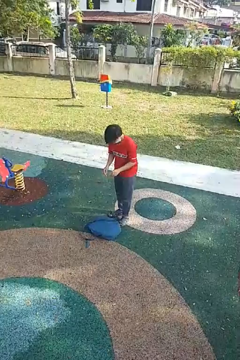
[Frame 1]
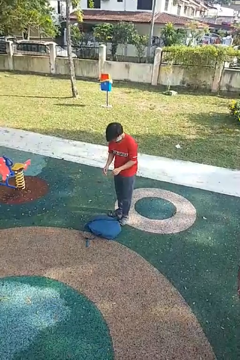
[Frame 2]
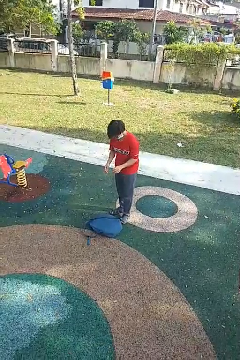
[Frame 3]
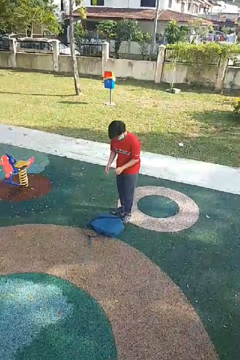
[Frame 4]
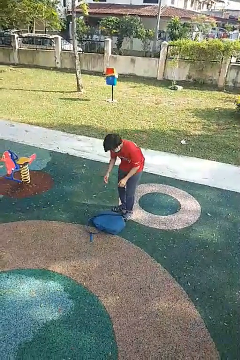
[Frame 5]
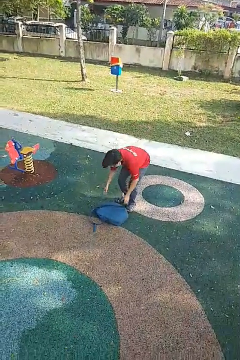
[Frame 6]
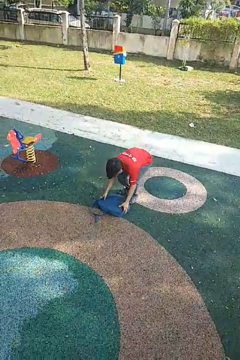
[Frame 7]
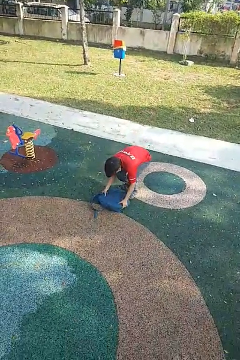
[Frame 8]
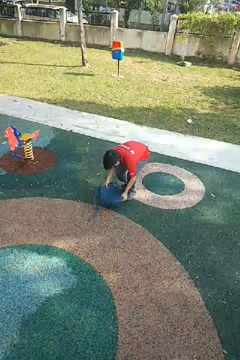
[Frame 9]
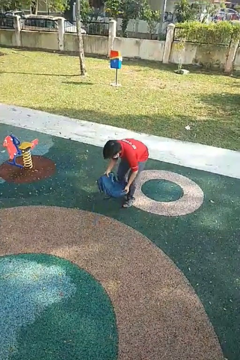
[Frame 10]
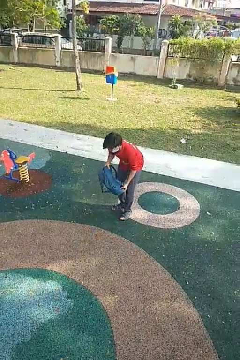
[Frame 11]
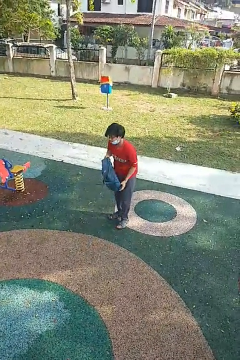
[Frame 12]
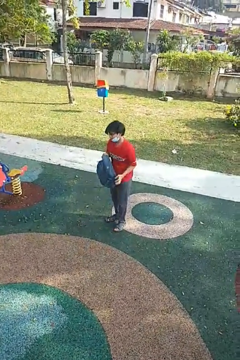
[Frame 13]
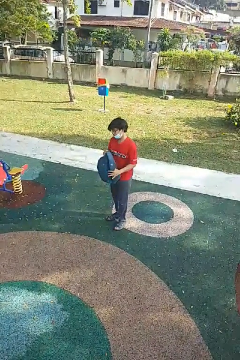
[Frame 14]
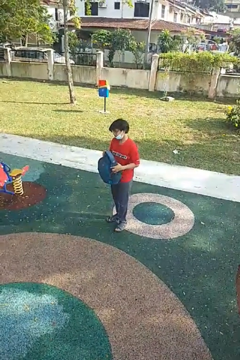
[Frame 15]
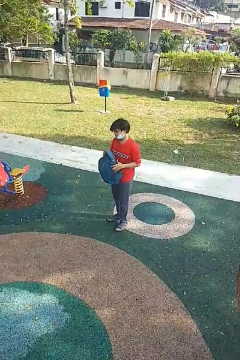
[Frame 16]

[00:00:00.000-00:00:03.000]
person picks up object from floor

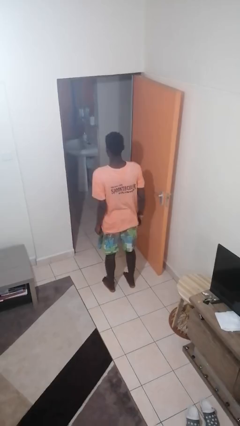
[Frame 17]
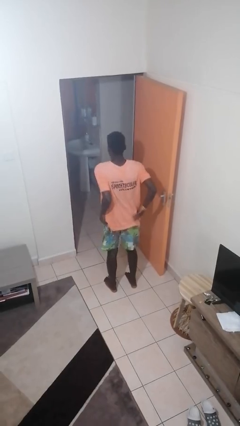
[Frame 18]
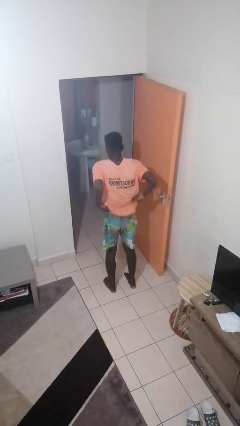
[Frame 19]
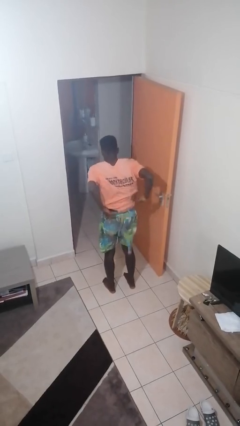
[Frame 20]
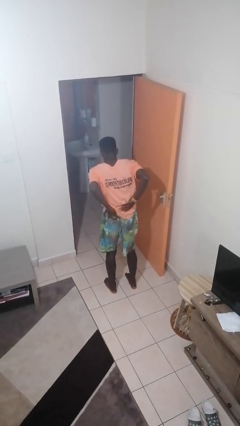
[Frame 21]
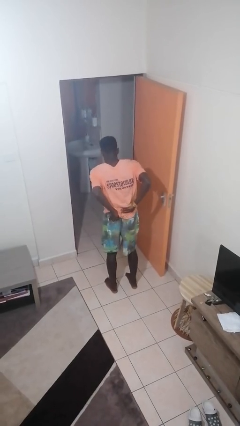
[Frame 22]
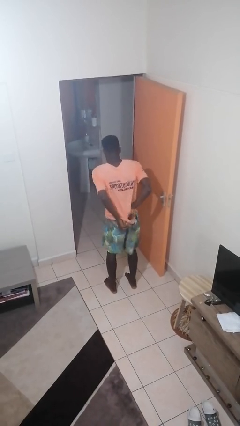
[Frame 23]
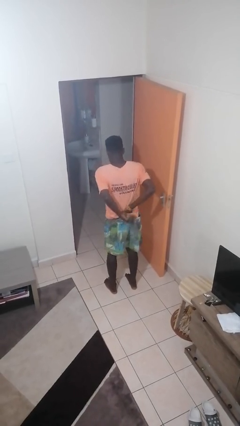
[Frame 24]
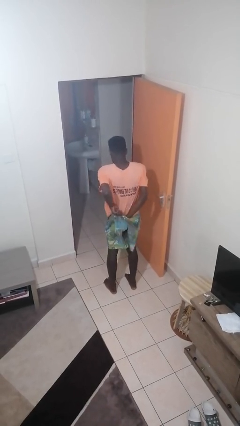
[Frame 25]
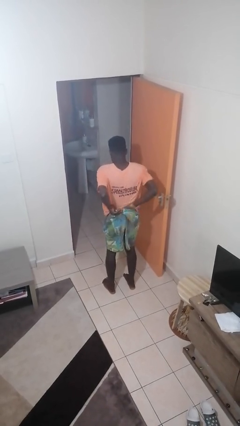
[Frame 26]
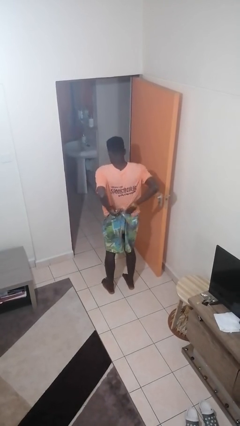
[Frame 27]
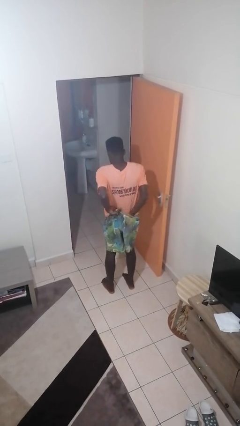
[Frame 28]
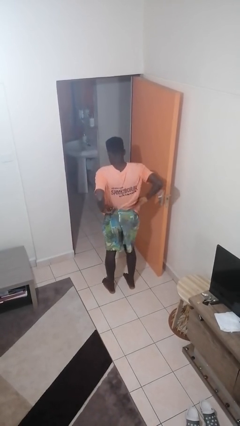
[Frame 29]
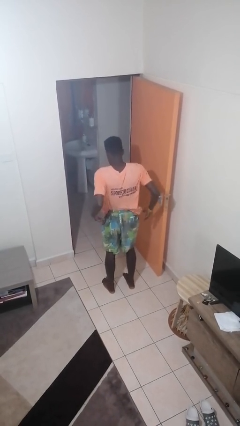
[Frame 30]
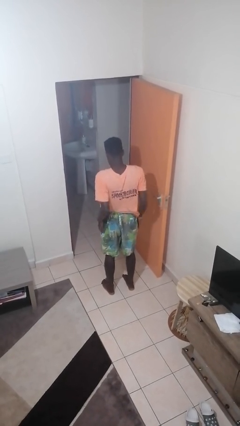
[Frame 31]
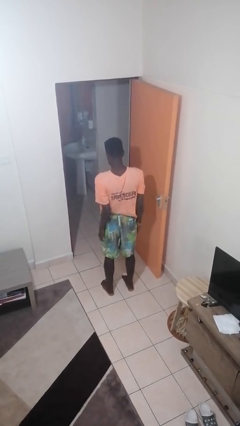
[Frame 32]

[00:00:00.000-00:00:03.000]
person tucks in shirt

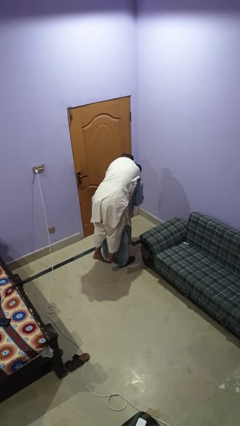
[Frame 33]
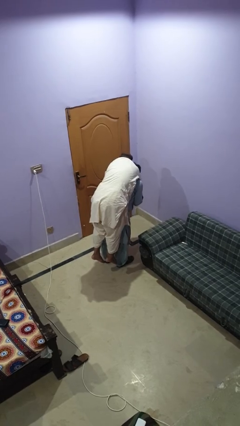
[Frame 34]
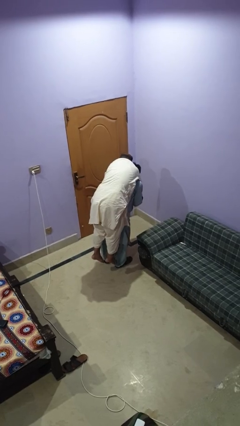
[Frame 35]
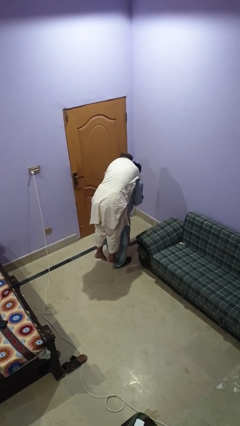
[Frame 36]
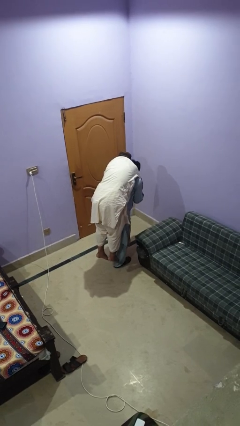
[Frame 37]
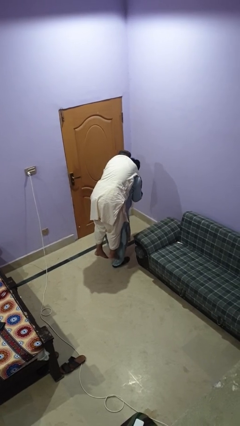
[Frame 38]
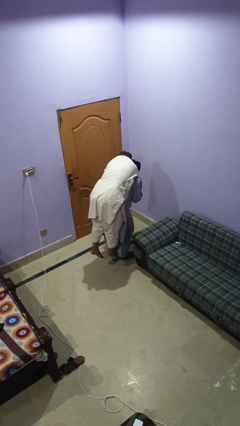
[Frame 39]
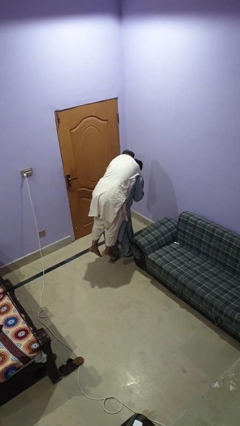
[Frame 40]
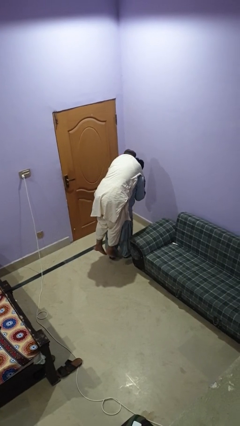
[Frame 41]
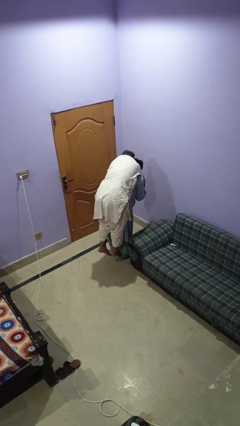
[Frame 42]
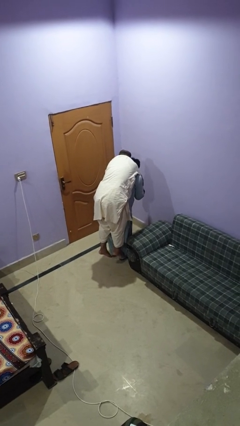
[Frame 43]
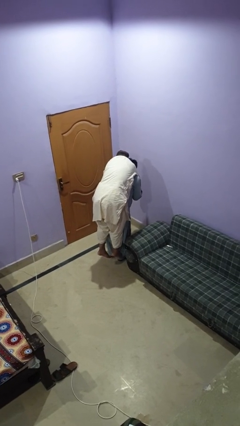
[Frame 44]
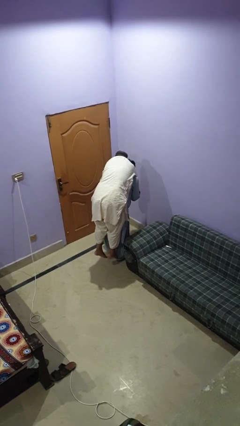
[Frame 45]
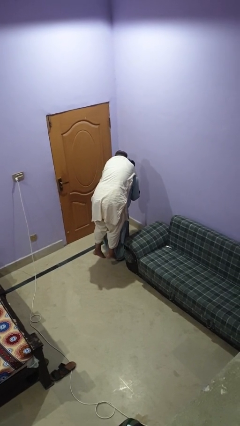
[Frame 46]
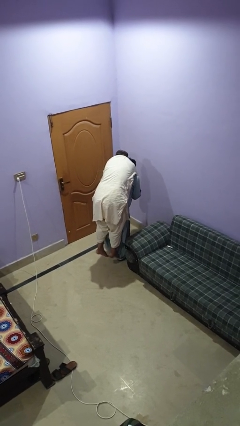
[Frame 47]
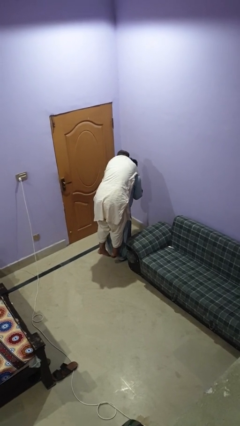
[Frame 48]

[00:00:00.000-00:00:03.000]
person carries person on back

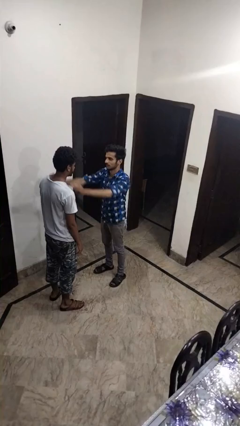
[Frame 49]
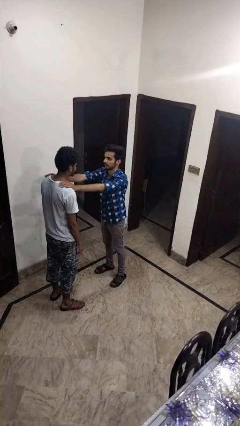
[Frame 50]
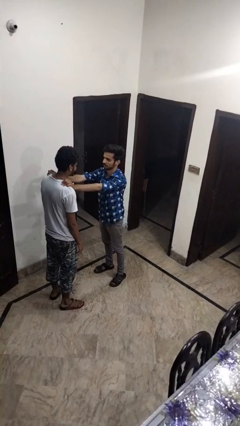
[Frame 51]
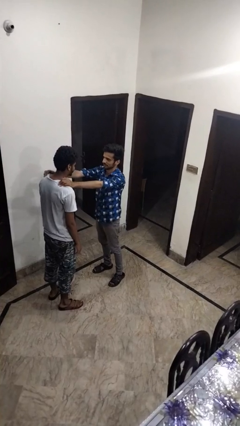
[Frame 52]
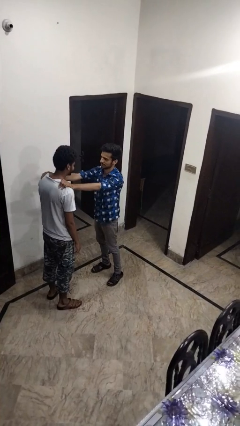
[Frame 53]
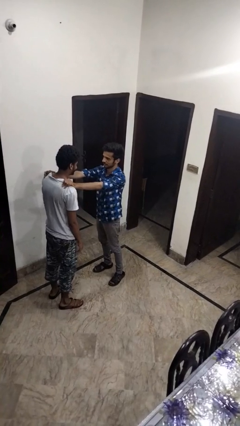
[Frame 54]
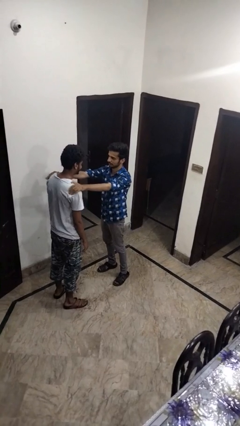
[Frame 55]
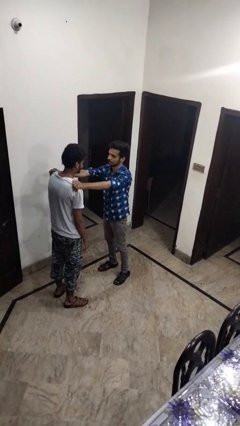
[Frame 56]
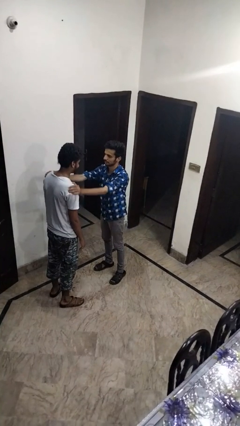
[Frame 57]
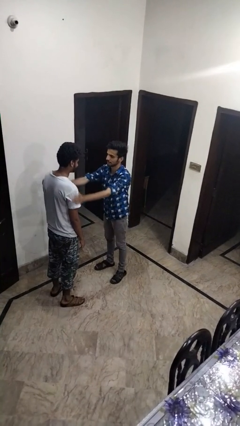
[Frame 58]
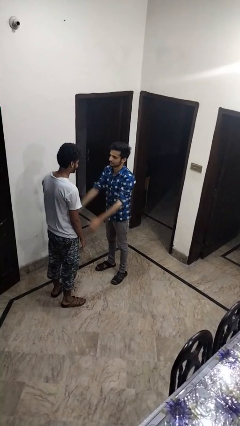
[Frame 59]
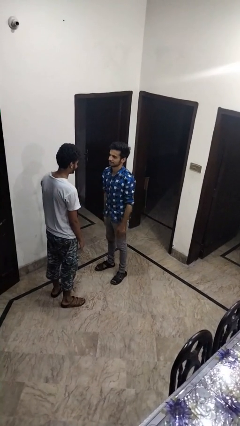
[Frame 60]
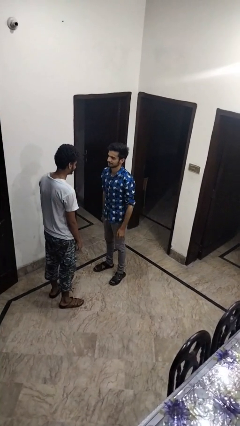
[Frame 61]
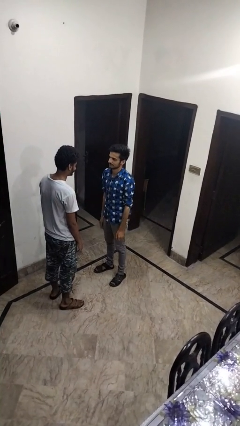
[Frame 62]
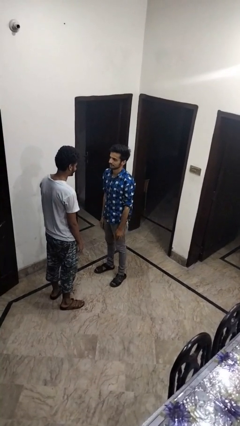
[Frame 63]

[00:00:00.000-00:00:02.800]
person pounds shoulders of person

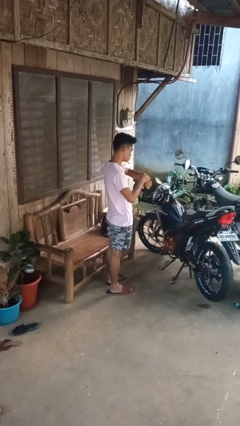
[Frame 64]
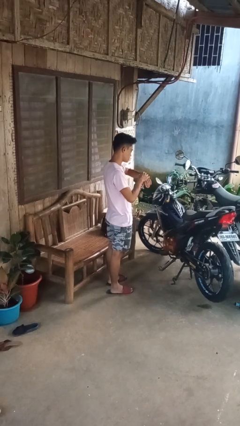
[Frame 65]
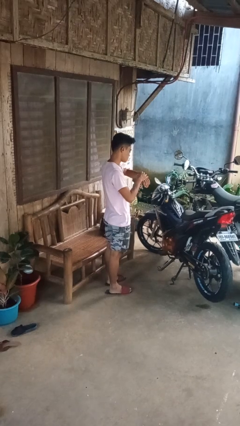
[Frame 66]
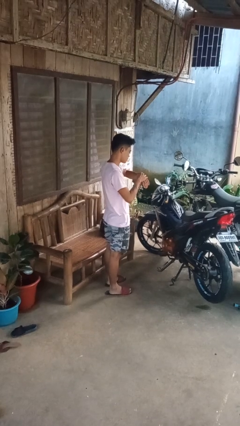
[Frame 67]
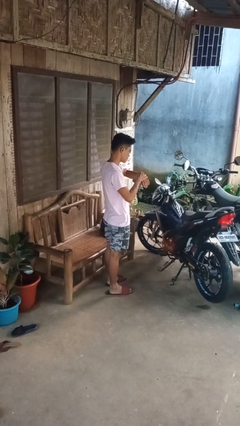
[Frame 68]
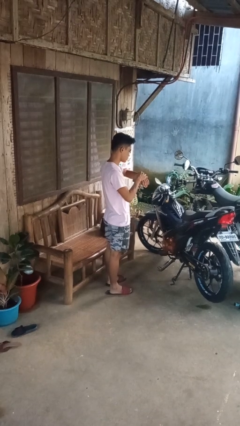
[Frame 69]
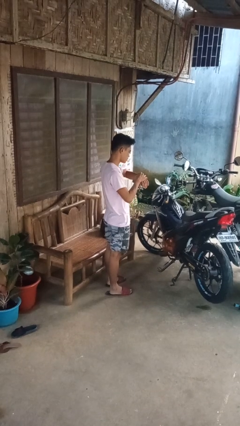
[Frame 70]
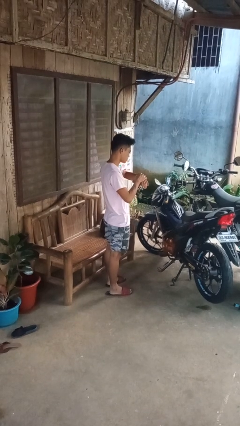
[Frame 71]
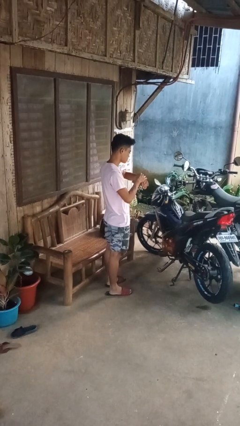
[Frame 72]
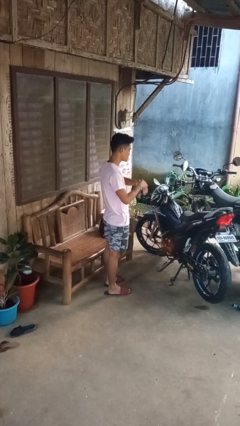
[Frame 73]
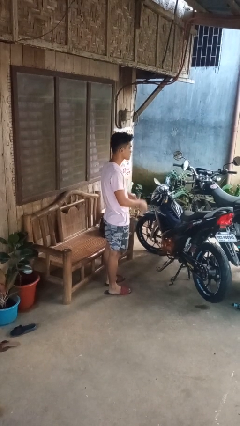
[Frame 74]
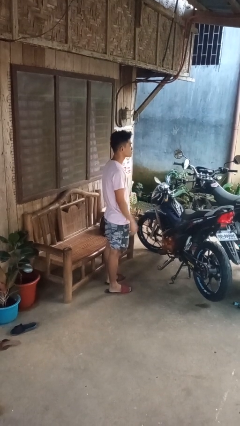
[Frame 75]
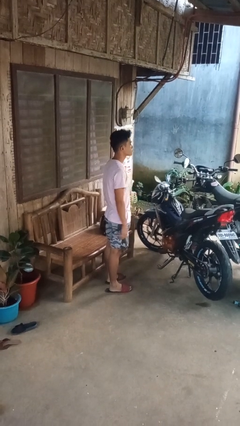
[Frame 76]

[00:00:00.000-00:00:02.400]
person looks at wristwatch

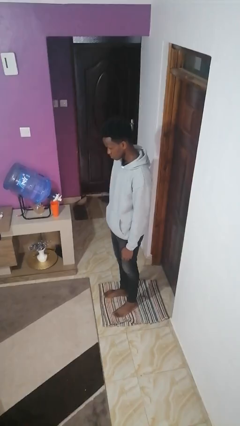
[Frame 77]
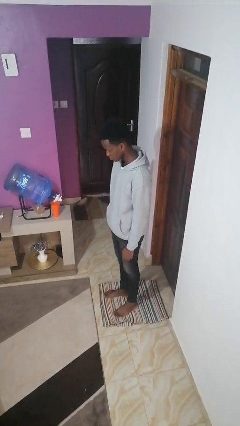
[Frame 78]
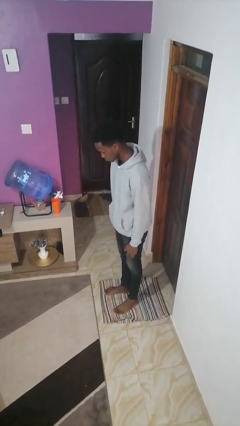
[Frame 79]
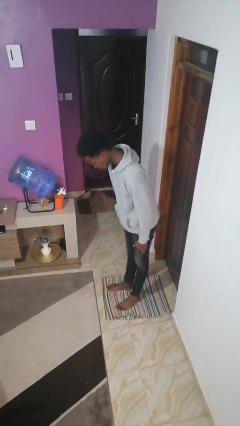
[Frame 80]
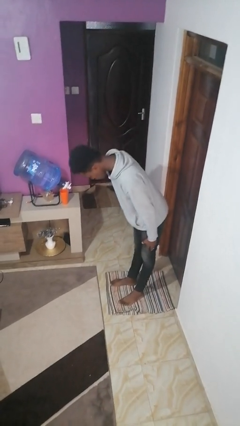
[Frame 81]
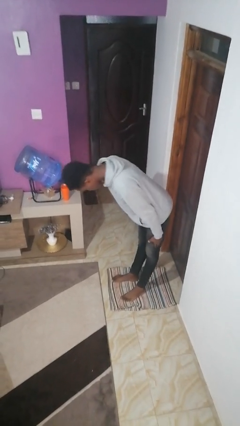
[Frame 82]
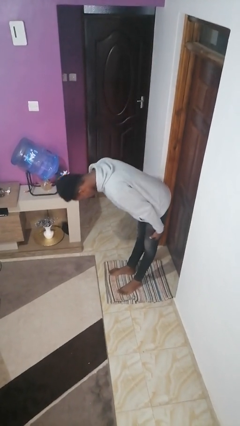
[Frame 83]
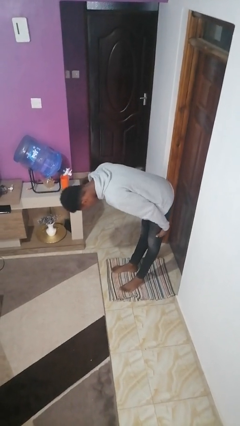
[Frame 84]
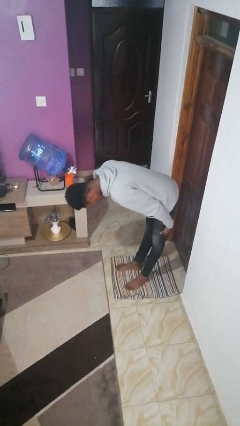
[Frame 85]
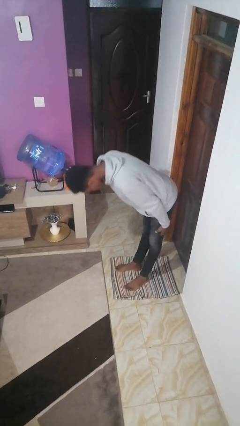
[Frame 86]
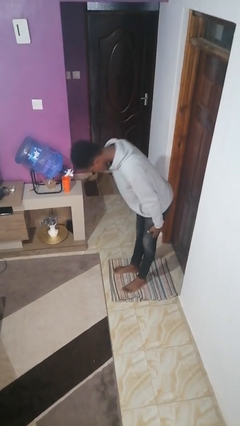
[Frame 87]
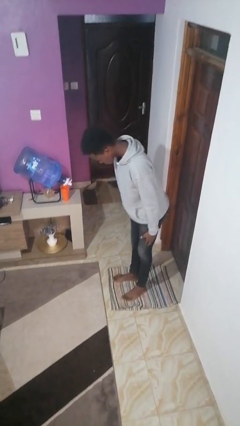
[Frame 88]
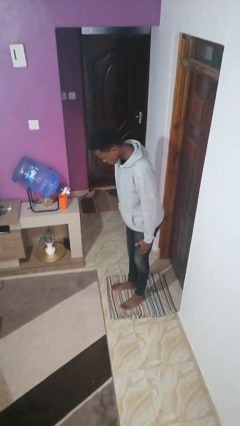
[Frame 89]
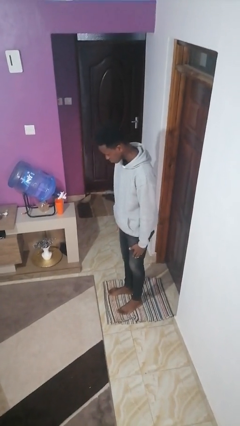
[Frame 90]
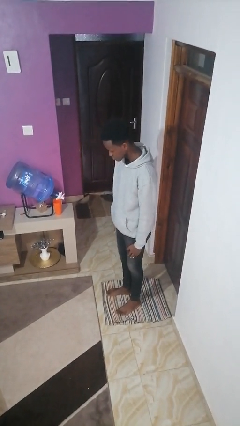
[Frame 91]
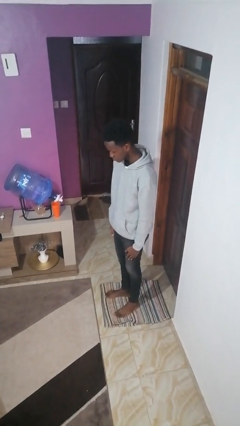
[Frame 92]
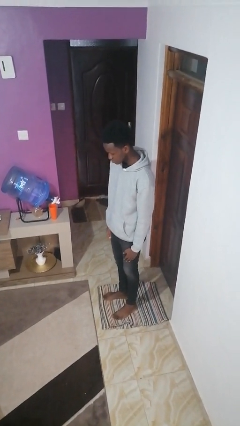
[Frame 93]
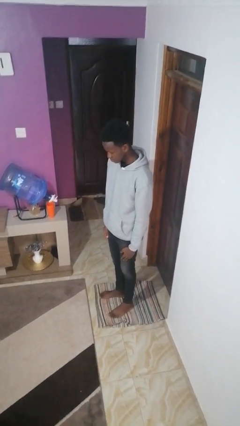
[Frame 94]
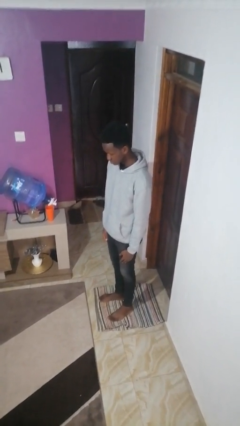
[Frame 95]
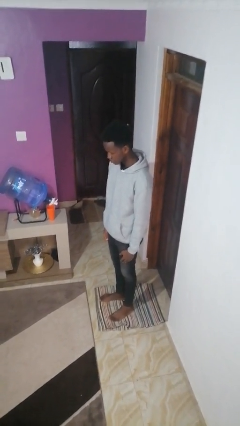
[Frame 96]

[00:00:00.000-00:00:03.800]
person bows
